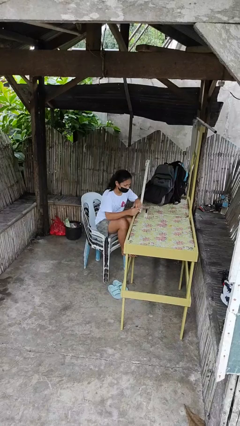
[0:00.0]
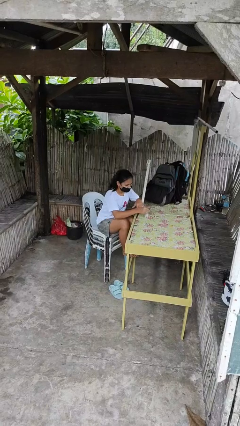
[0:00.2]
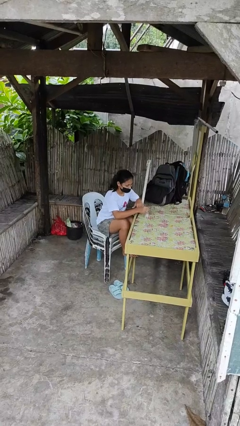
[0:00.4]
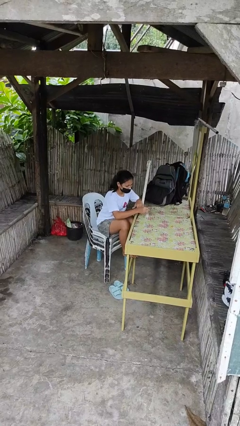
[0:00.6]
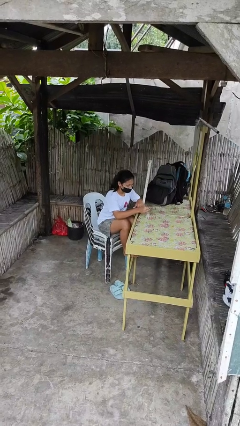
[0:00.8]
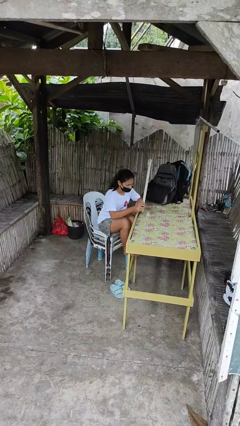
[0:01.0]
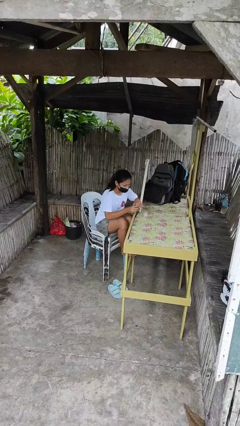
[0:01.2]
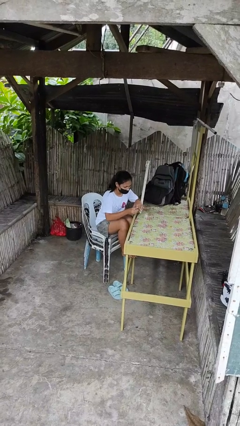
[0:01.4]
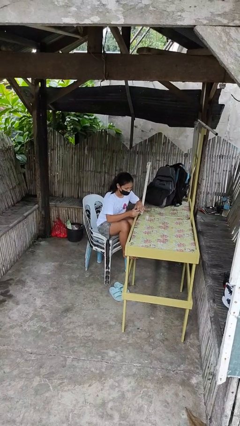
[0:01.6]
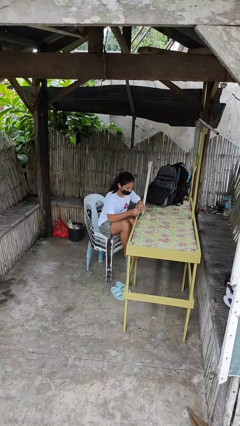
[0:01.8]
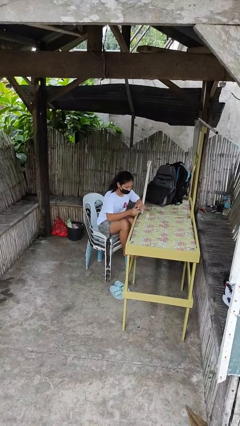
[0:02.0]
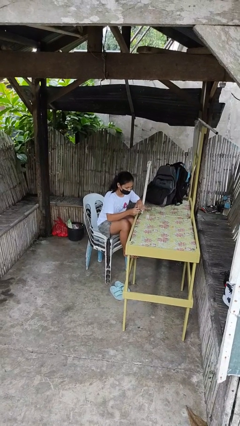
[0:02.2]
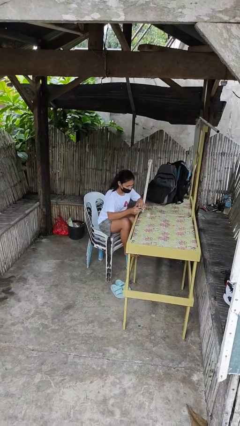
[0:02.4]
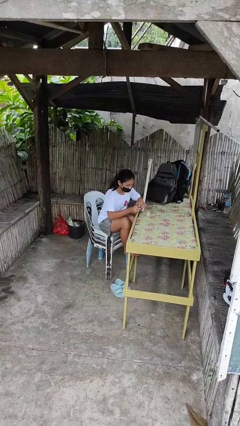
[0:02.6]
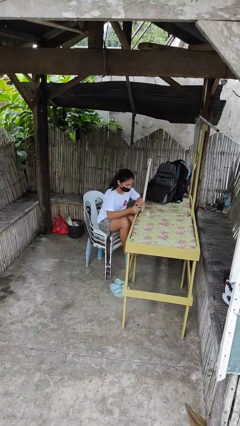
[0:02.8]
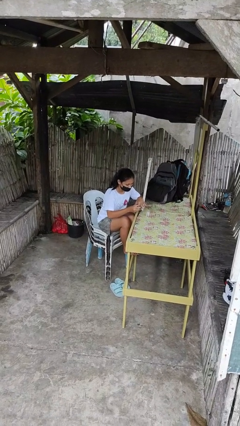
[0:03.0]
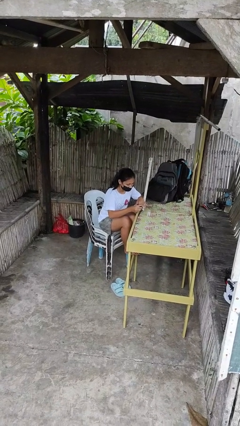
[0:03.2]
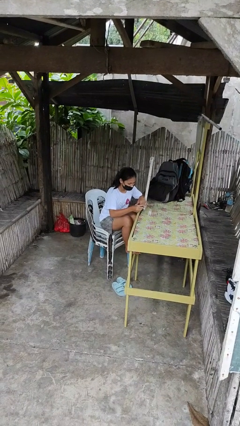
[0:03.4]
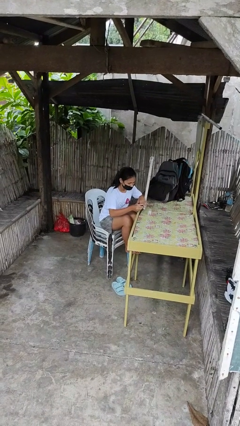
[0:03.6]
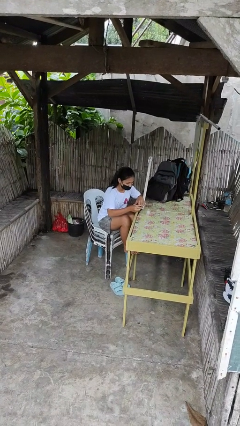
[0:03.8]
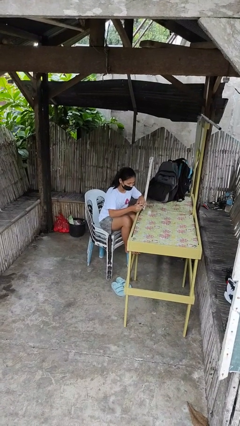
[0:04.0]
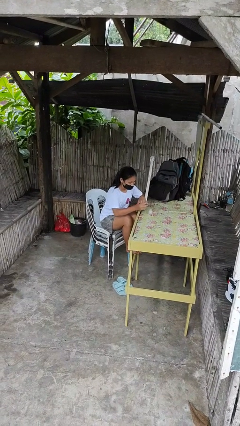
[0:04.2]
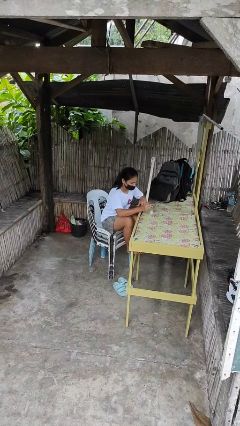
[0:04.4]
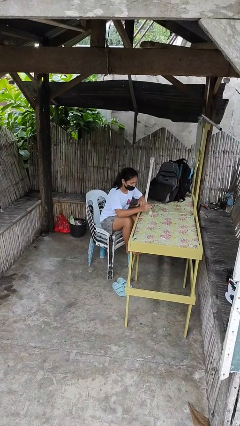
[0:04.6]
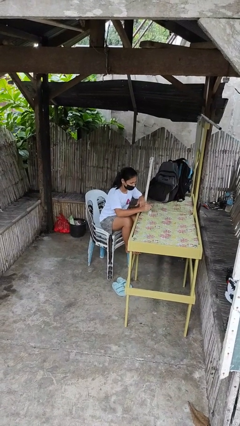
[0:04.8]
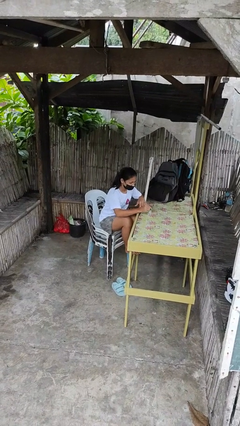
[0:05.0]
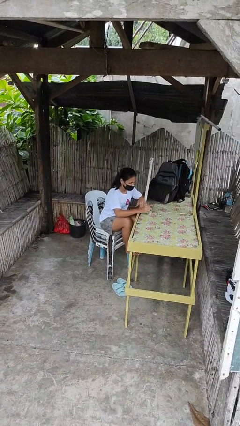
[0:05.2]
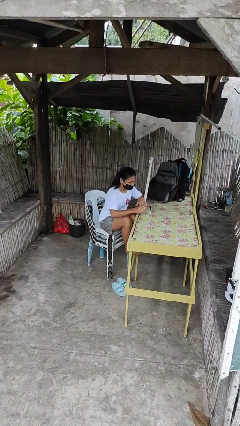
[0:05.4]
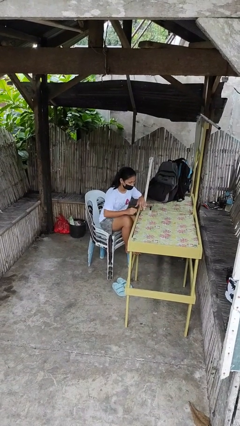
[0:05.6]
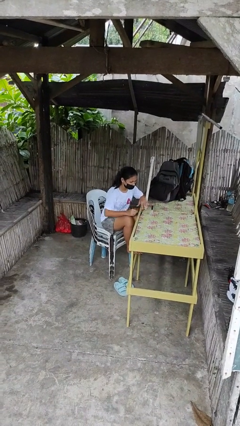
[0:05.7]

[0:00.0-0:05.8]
person paints fingernails

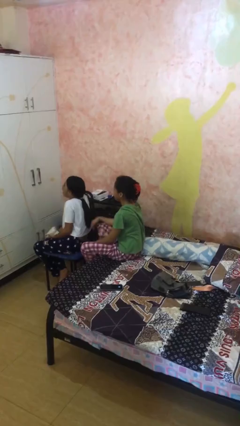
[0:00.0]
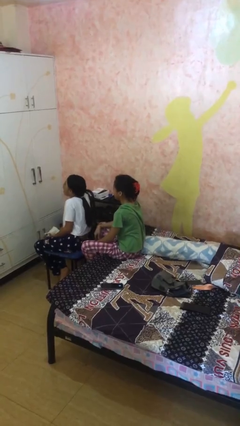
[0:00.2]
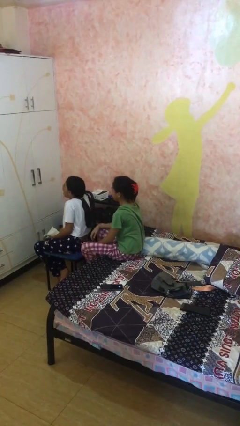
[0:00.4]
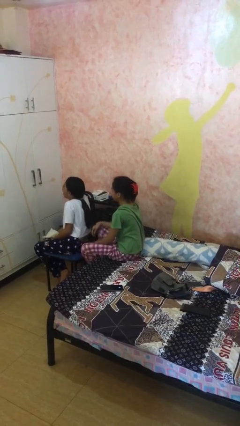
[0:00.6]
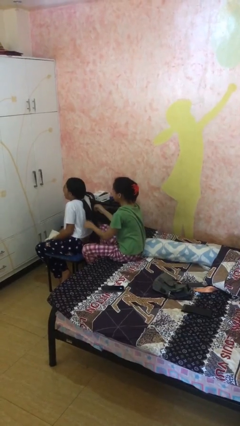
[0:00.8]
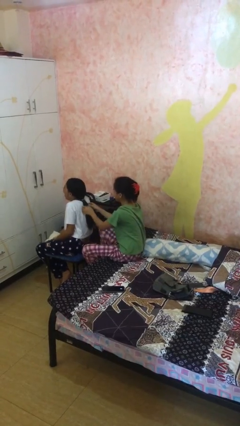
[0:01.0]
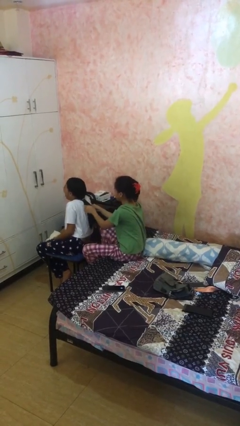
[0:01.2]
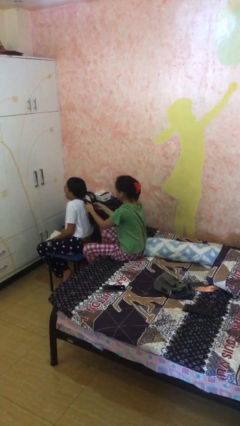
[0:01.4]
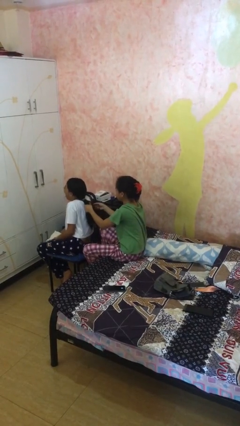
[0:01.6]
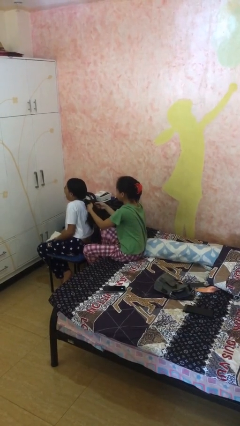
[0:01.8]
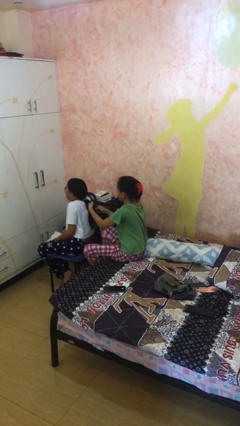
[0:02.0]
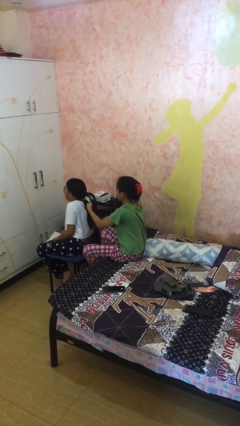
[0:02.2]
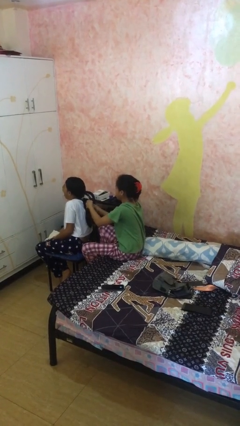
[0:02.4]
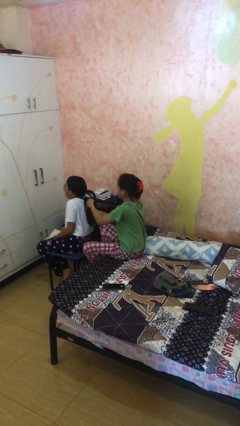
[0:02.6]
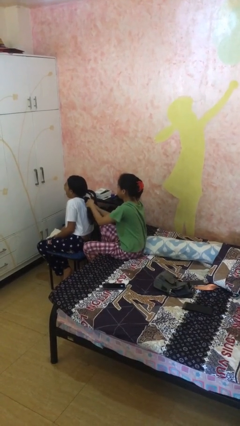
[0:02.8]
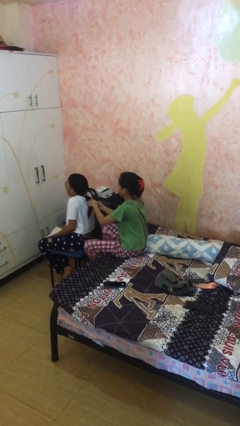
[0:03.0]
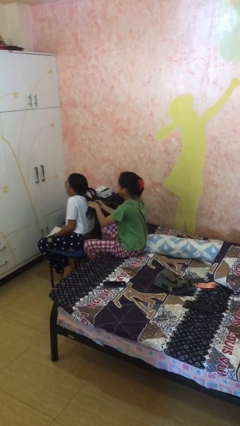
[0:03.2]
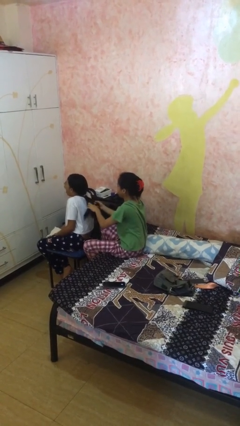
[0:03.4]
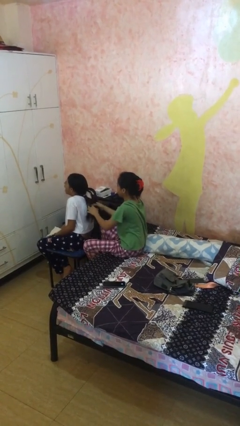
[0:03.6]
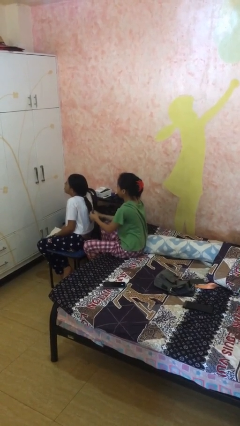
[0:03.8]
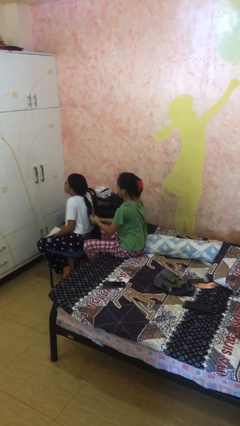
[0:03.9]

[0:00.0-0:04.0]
person braids hair of person

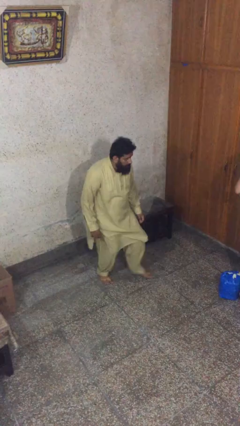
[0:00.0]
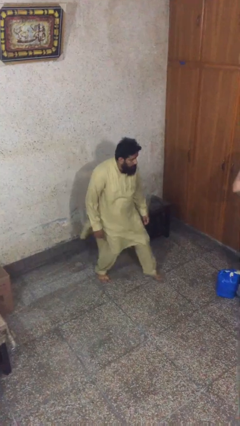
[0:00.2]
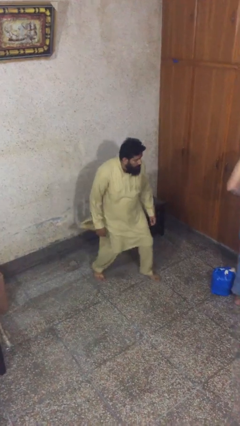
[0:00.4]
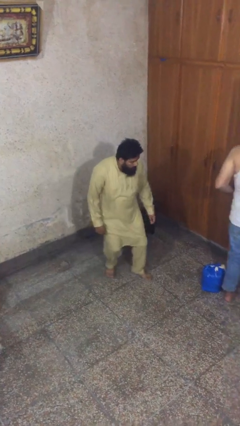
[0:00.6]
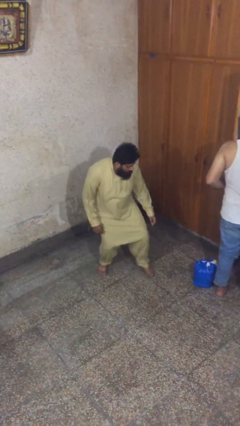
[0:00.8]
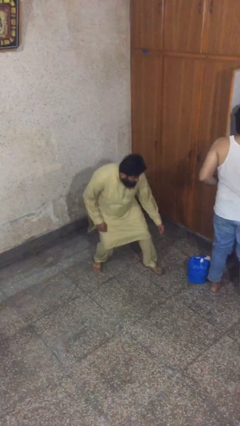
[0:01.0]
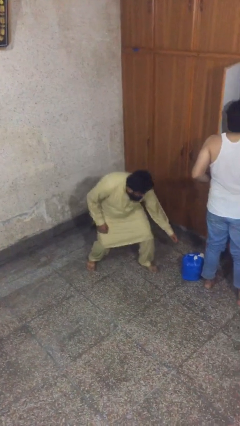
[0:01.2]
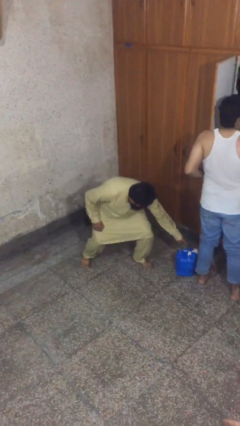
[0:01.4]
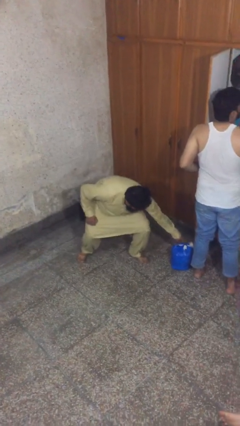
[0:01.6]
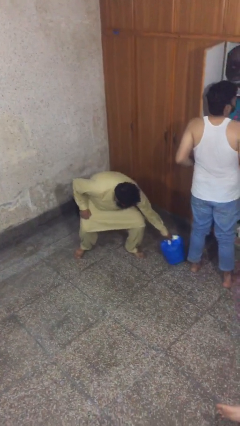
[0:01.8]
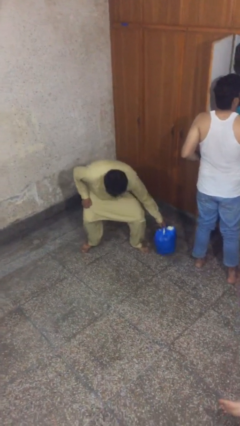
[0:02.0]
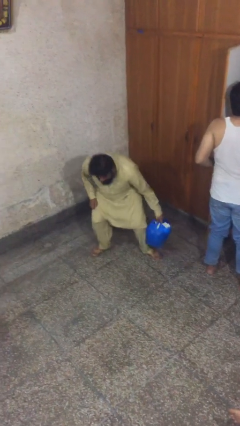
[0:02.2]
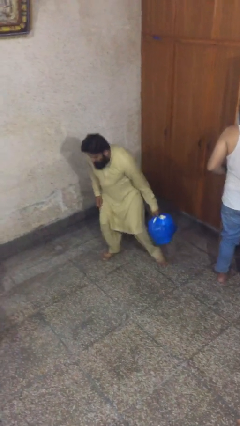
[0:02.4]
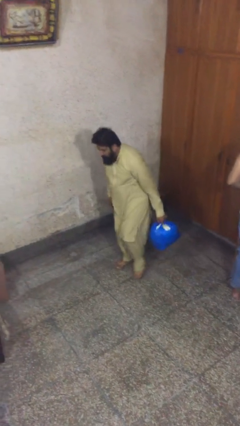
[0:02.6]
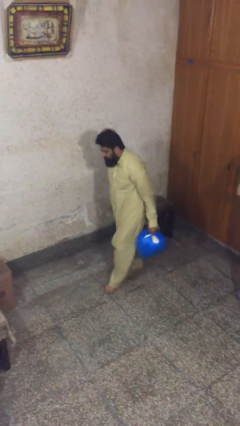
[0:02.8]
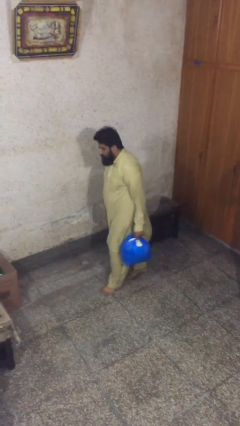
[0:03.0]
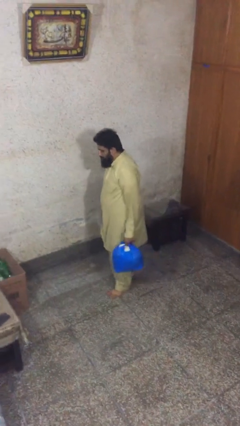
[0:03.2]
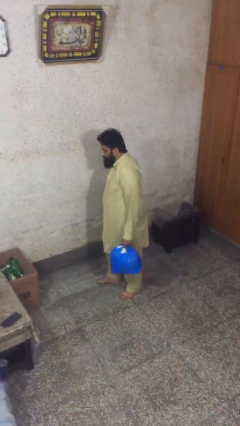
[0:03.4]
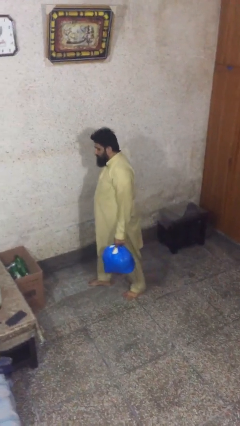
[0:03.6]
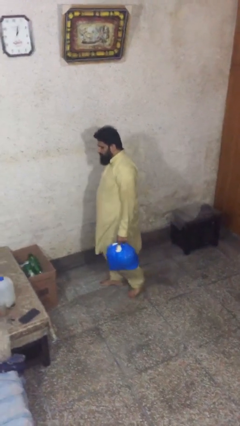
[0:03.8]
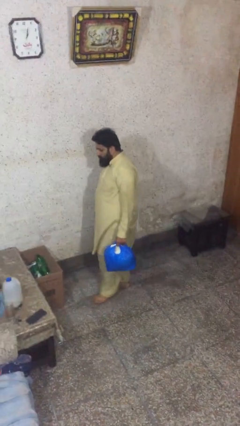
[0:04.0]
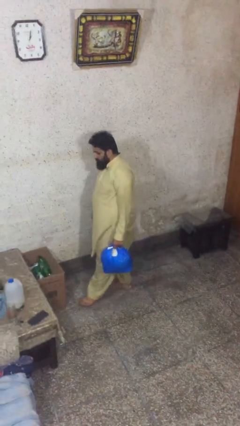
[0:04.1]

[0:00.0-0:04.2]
person steals object from person

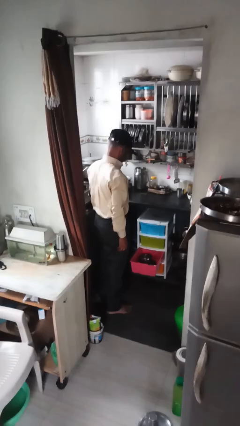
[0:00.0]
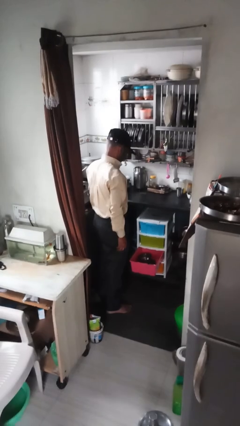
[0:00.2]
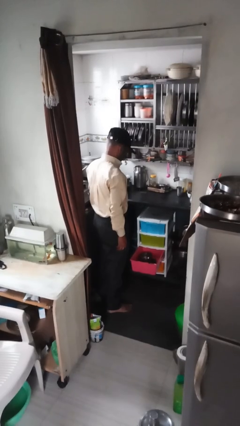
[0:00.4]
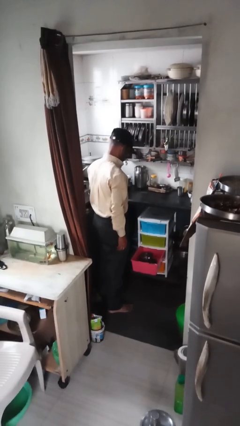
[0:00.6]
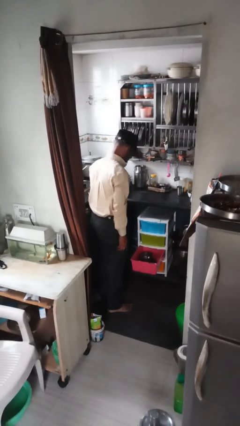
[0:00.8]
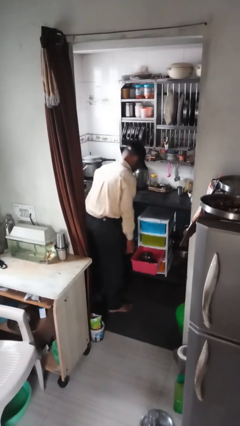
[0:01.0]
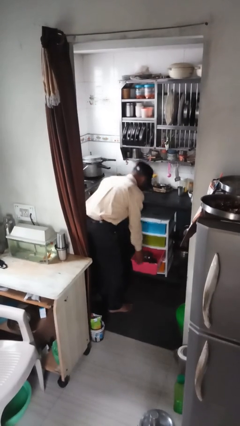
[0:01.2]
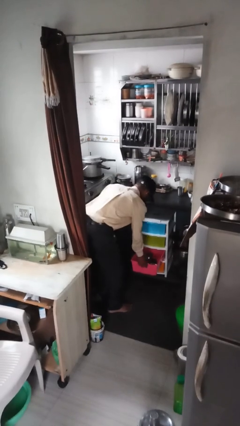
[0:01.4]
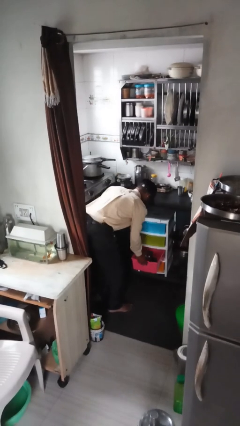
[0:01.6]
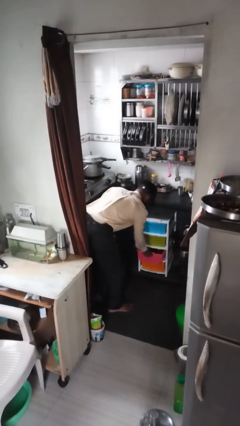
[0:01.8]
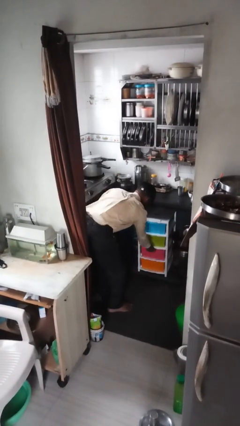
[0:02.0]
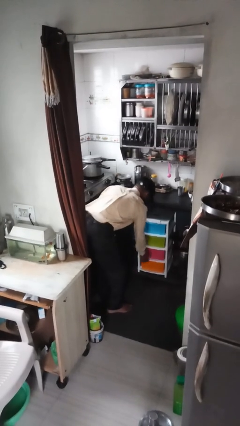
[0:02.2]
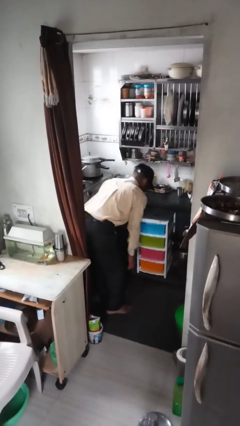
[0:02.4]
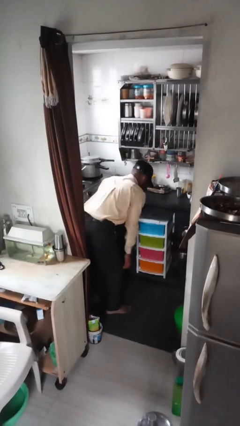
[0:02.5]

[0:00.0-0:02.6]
person closes kitchen drawer

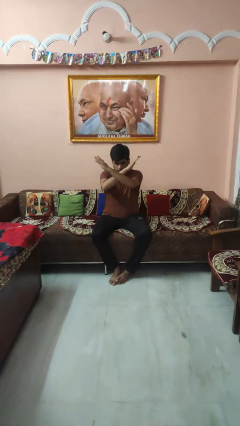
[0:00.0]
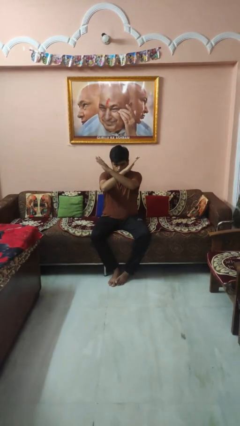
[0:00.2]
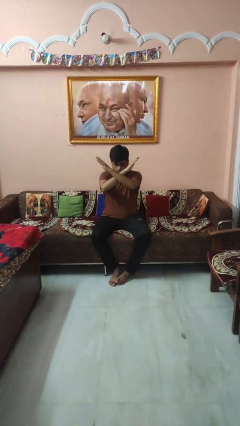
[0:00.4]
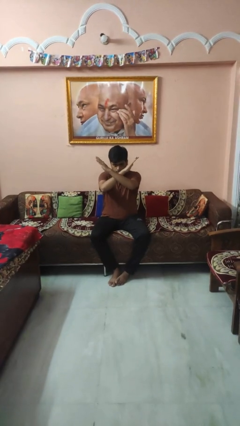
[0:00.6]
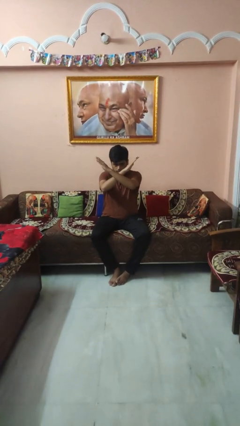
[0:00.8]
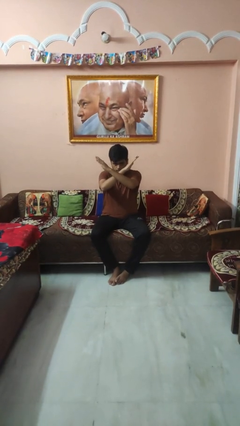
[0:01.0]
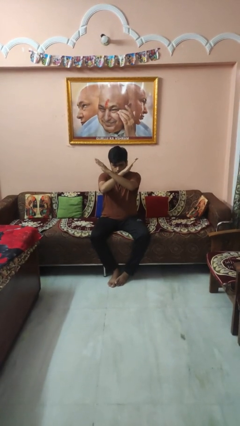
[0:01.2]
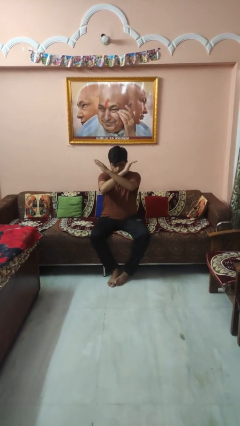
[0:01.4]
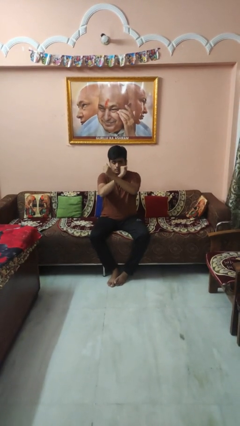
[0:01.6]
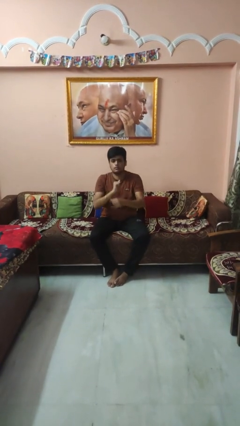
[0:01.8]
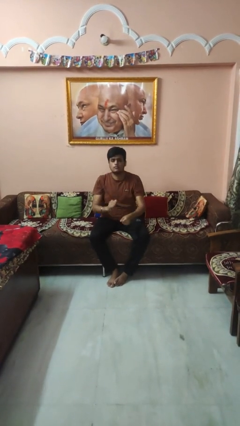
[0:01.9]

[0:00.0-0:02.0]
person gestures arms x
